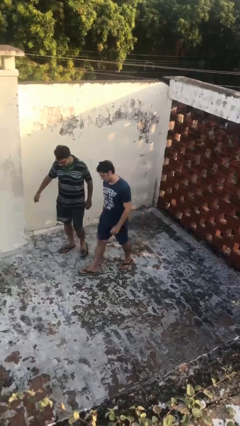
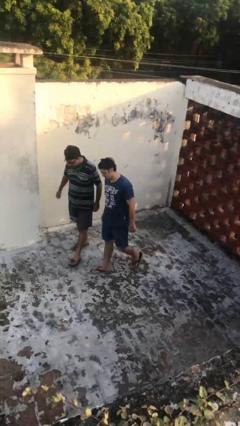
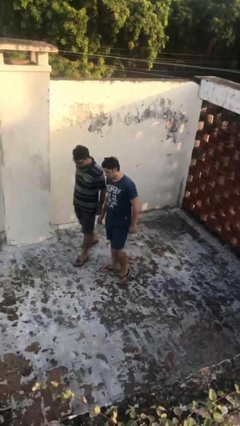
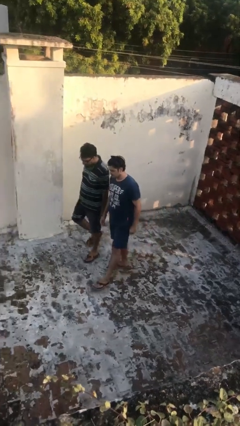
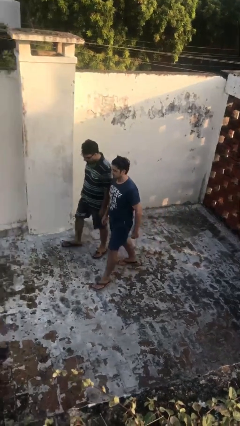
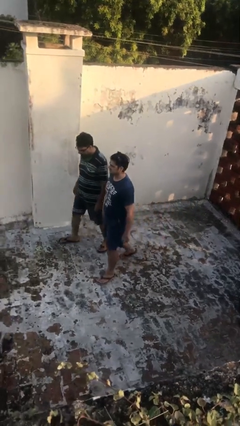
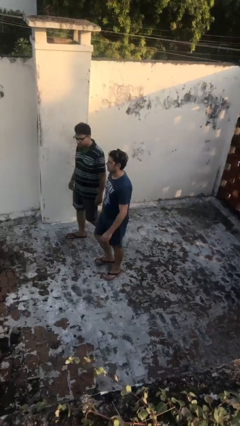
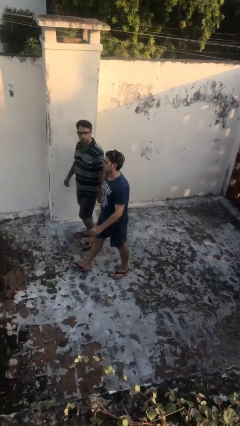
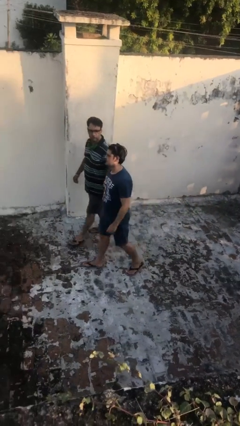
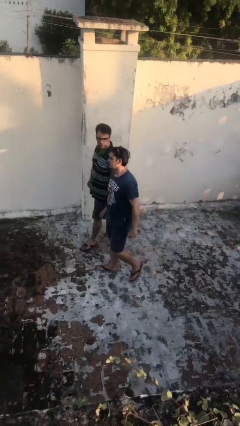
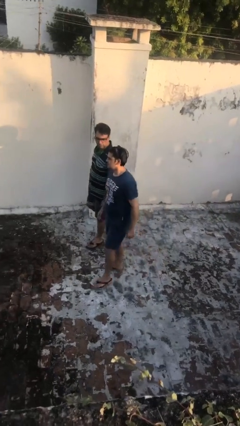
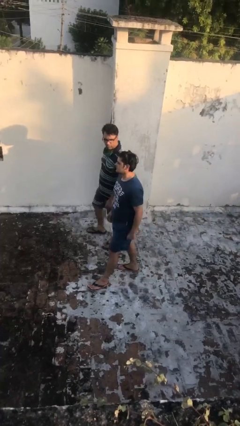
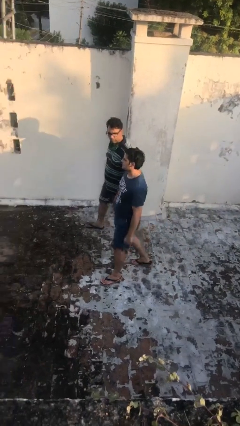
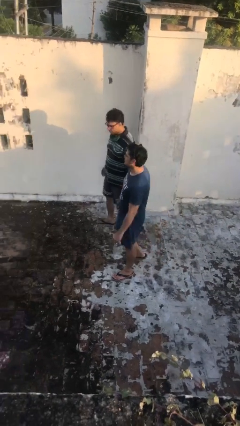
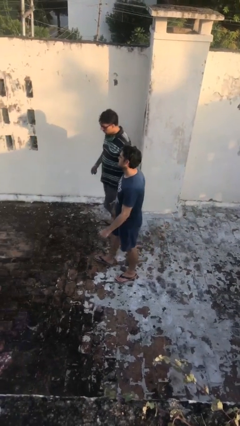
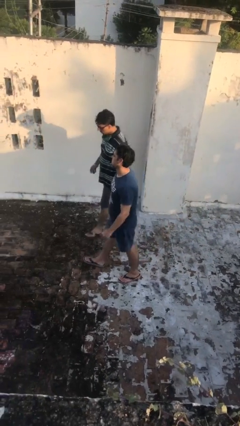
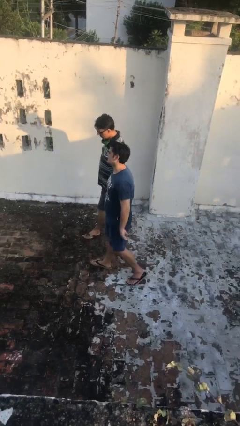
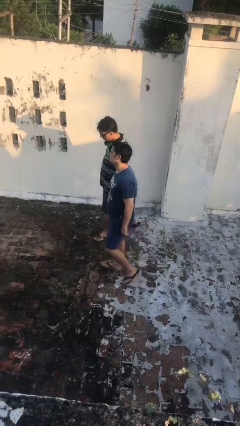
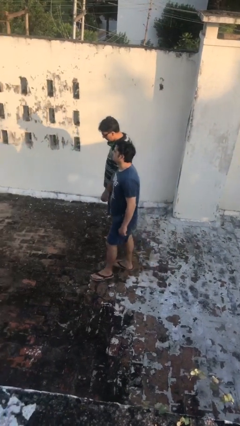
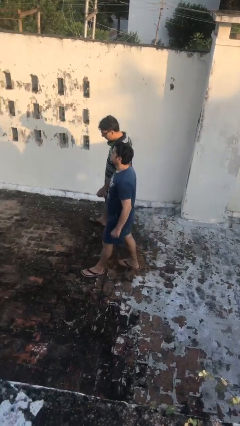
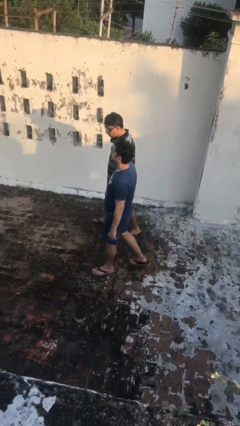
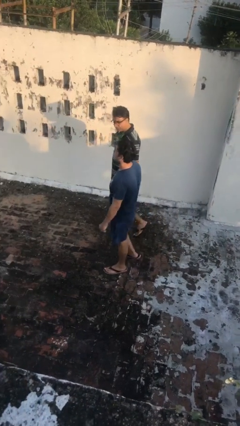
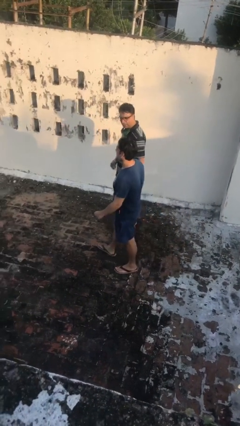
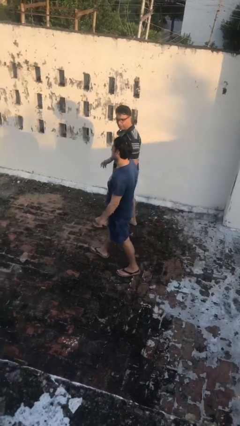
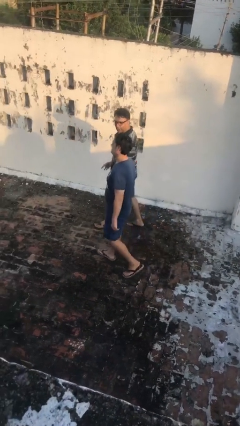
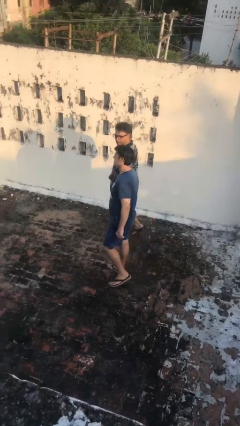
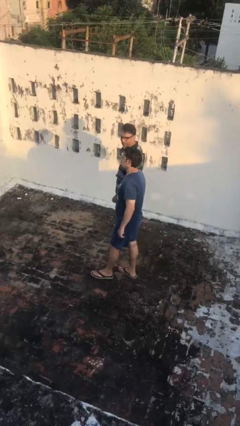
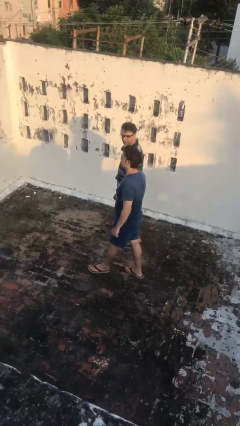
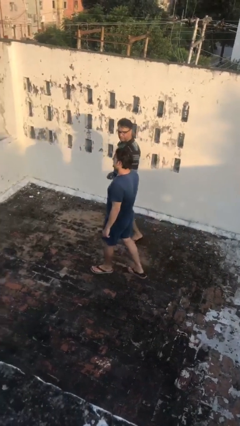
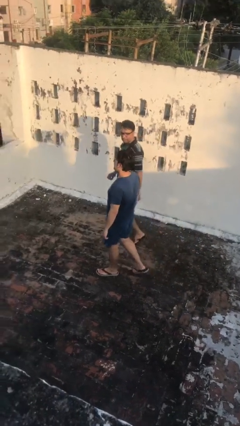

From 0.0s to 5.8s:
person talks to person

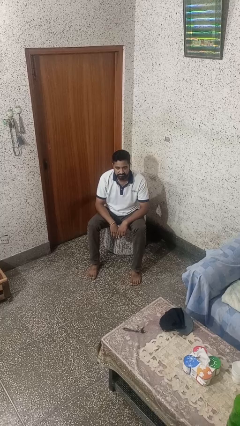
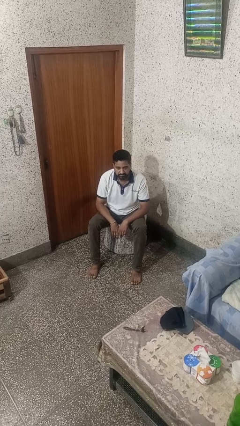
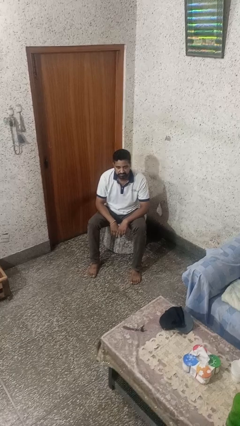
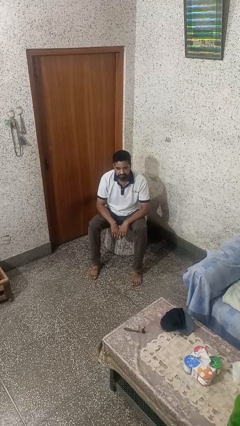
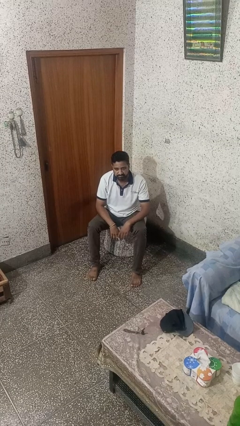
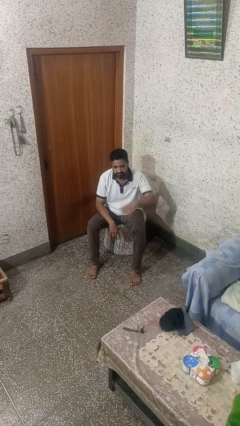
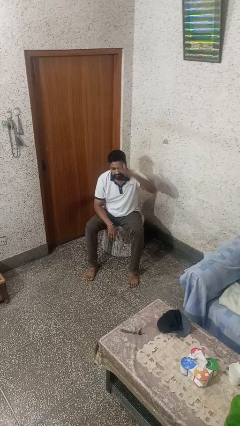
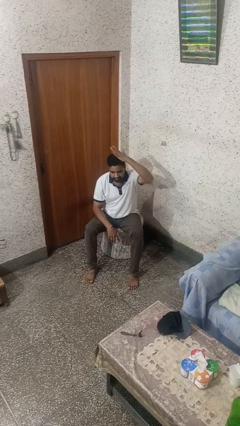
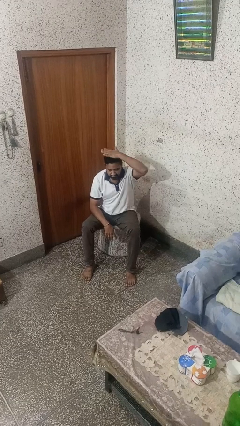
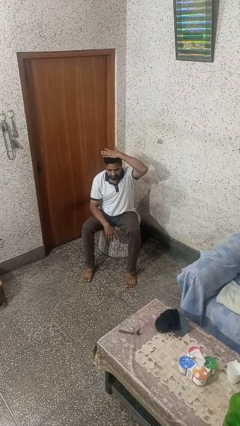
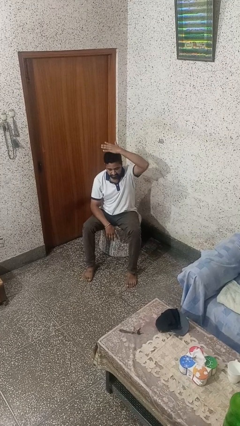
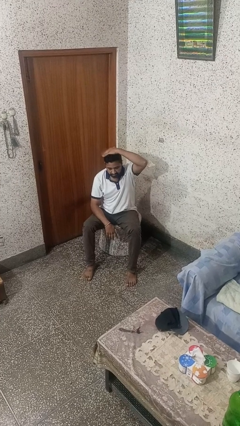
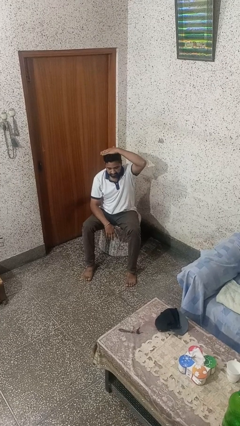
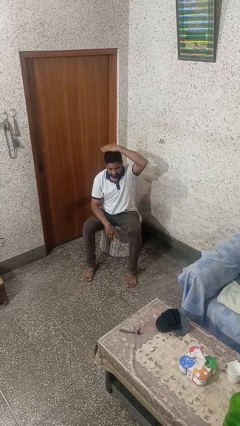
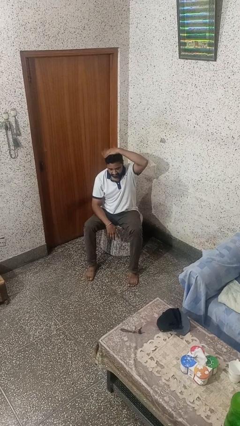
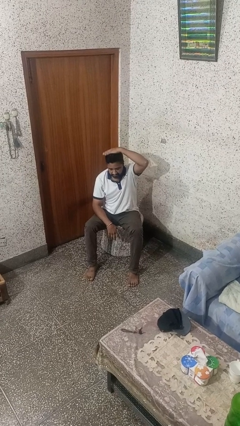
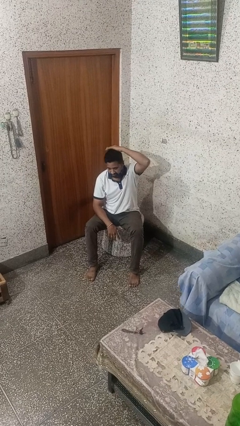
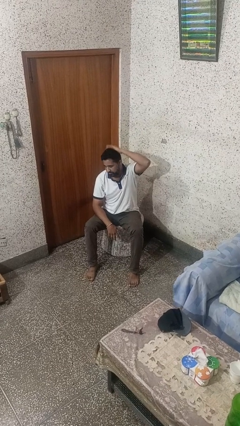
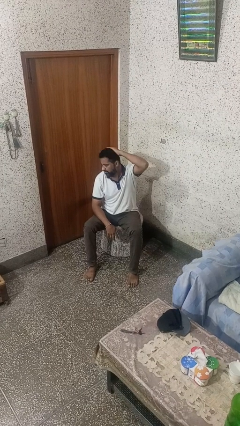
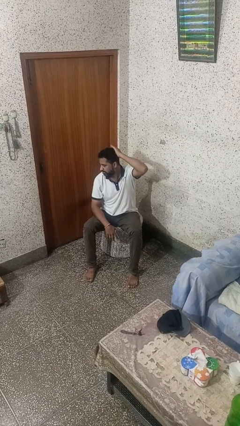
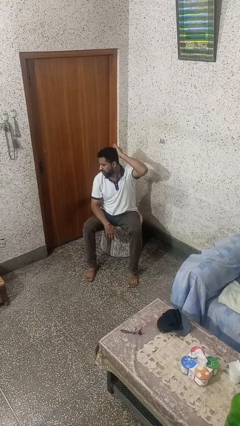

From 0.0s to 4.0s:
person gestures cut

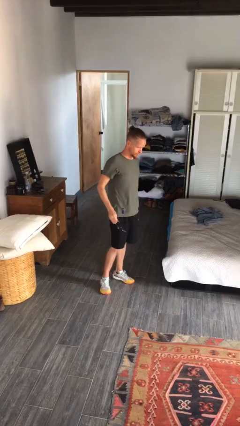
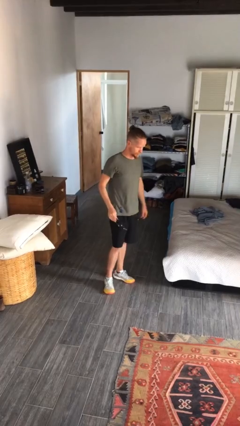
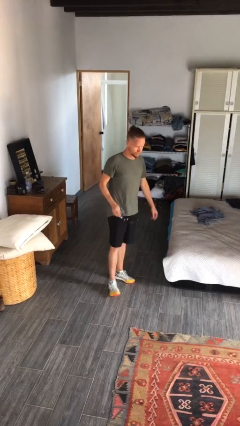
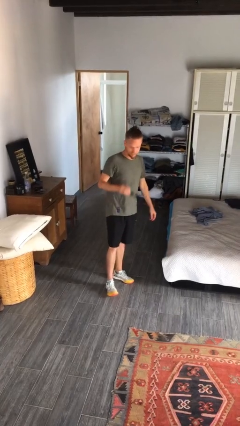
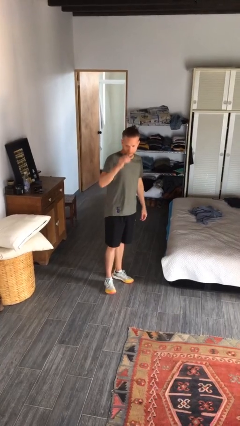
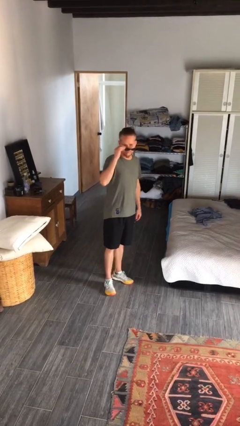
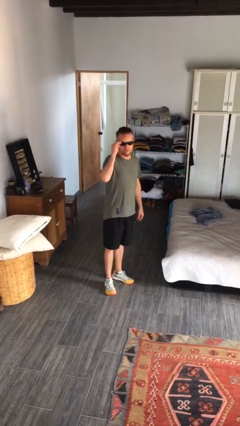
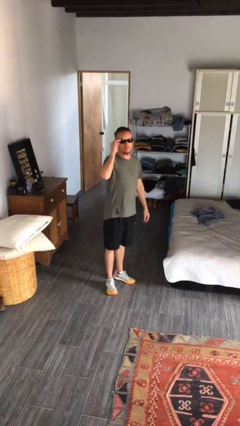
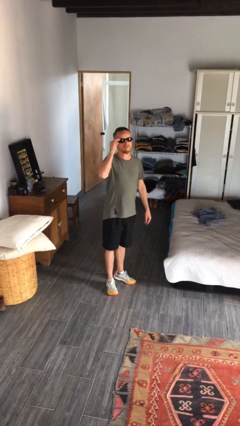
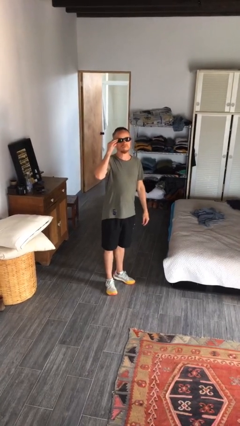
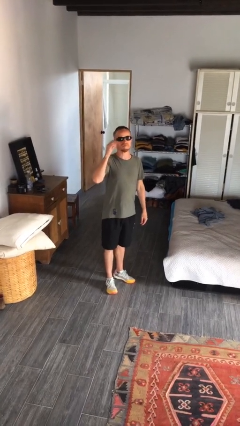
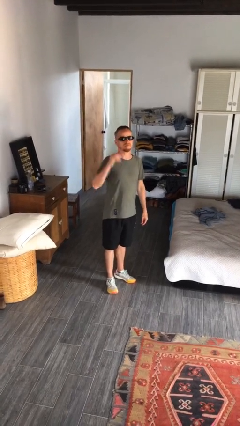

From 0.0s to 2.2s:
person puts on sunglasses

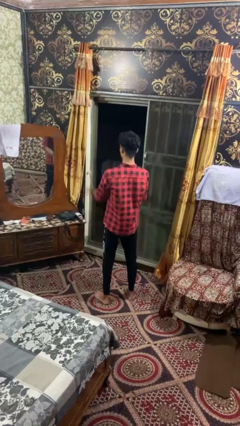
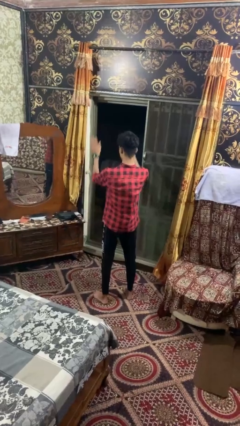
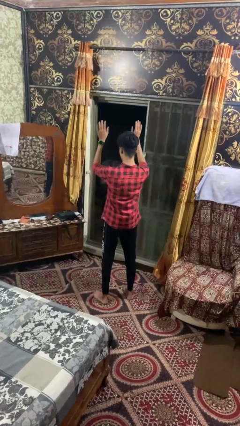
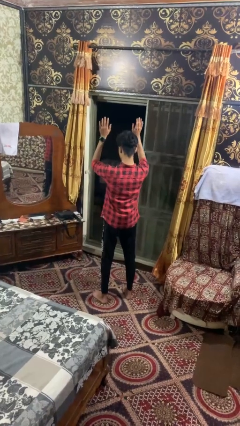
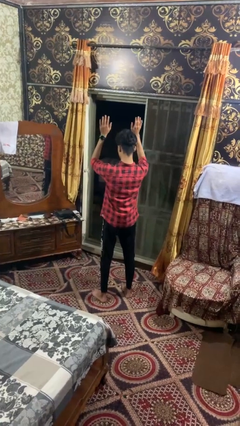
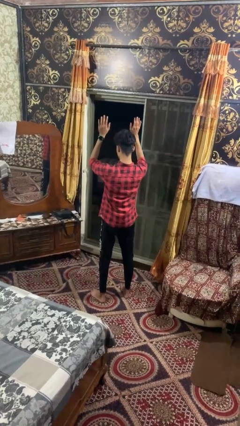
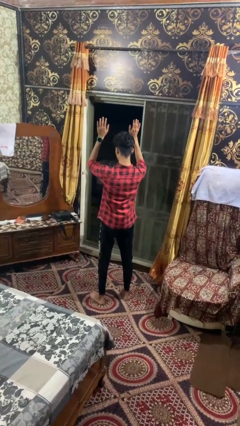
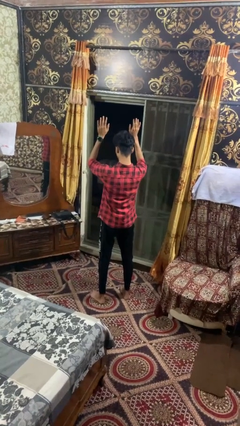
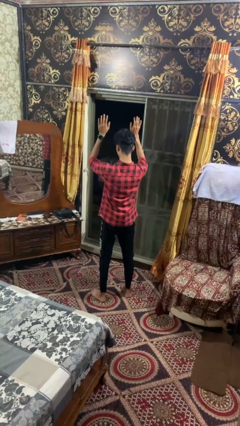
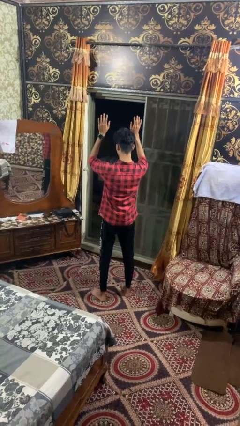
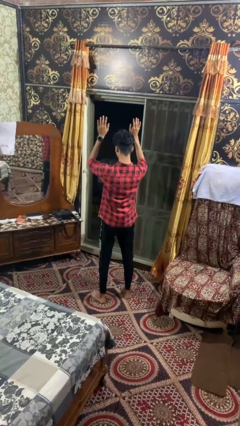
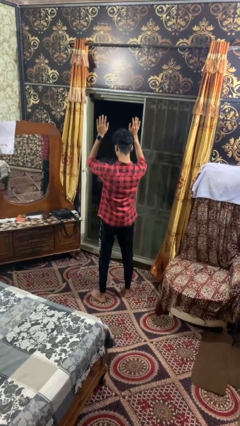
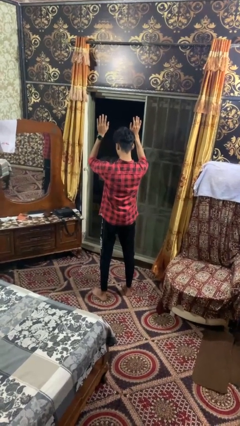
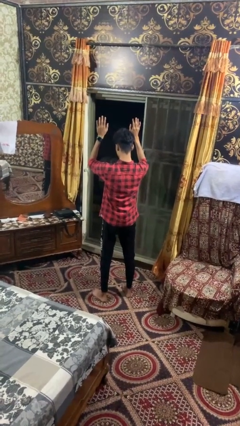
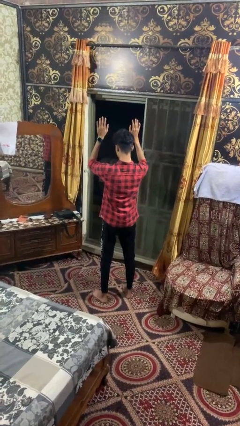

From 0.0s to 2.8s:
person gestures swipe up

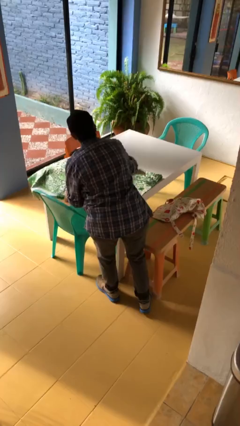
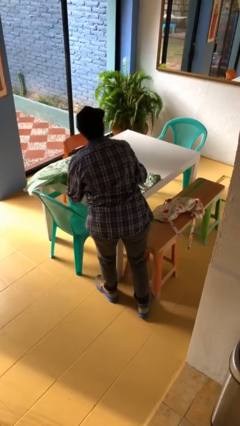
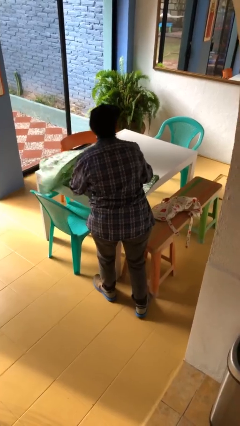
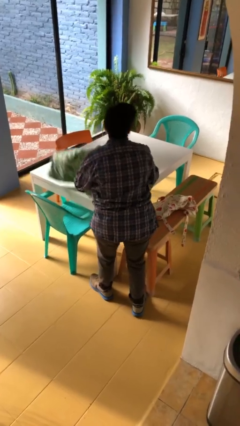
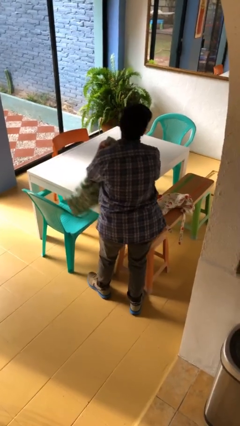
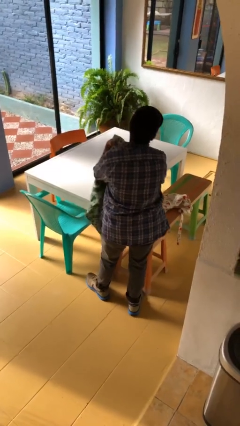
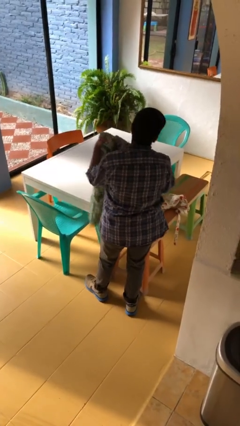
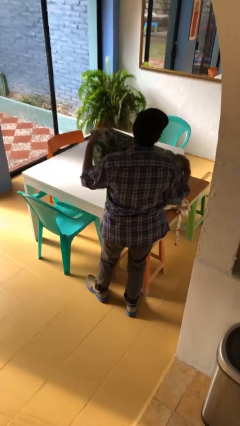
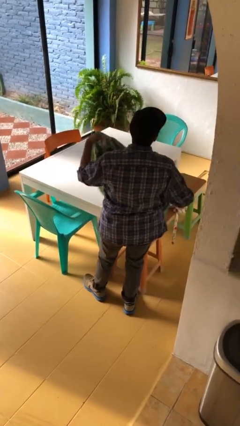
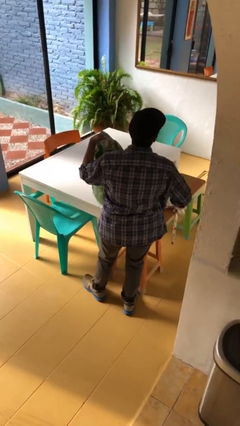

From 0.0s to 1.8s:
person folds tablecloth

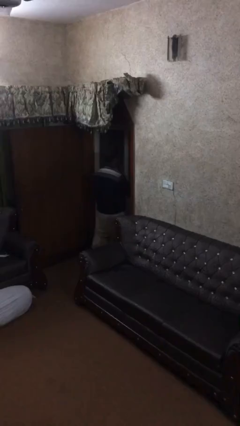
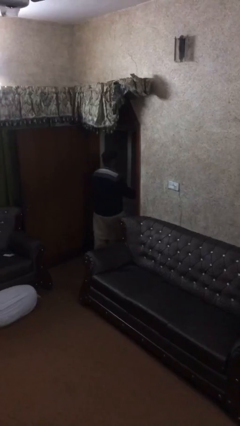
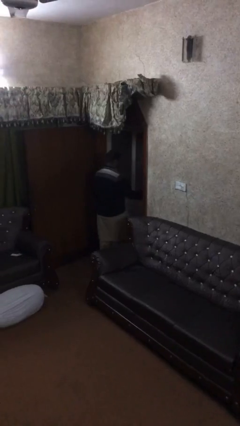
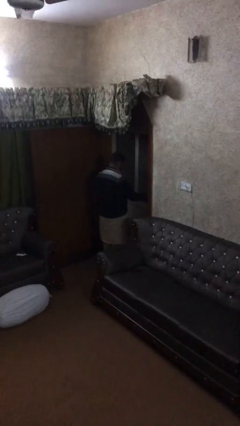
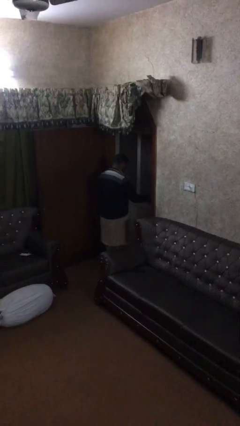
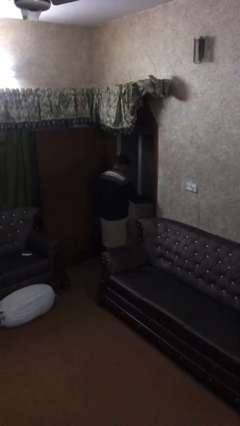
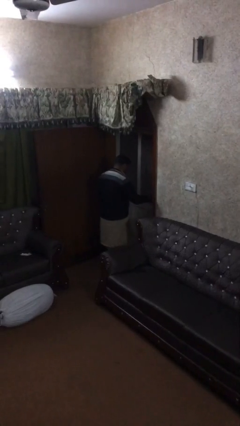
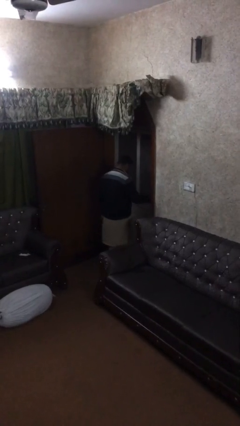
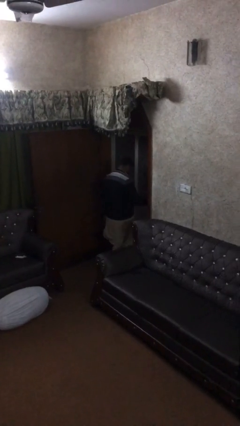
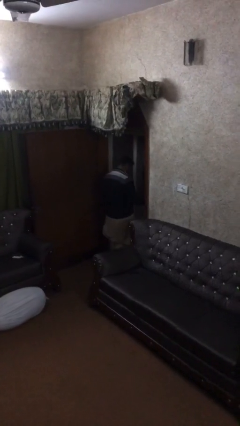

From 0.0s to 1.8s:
person closes facility door
